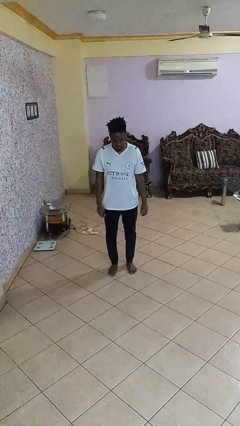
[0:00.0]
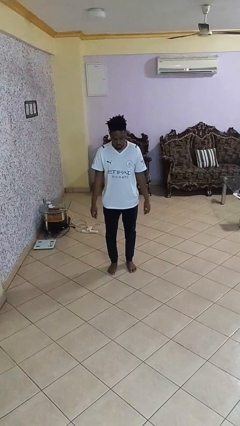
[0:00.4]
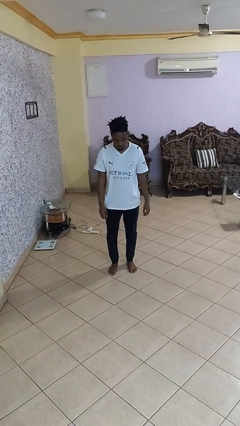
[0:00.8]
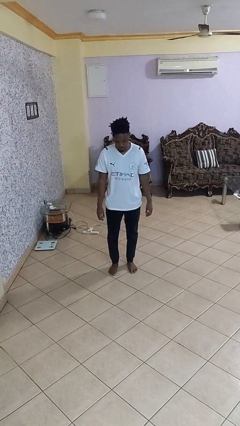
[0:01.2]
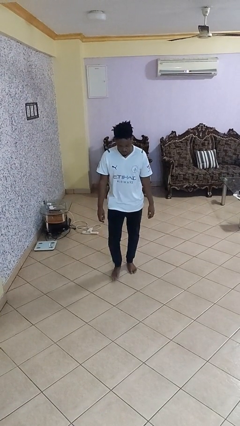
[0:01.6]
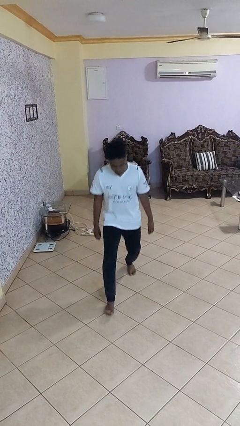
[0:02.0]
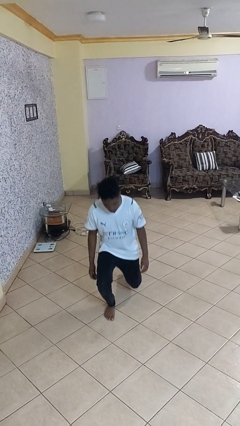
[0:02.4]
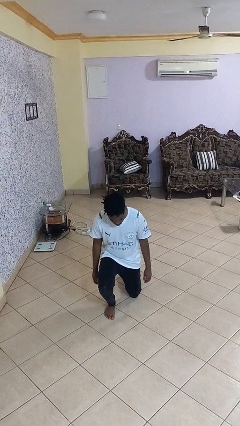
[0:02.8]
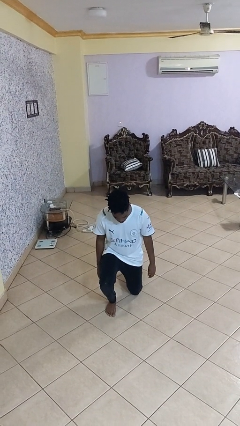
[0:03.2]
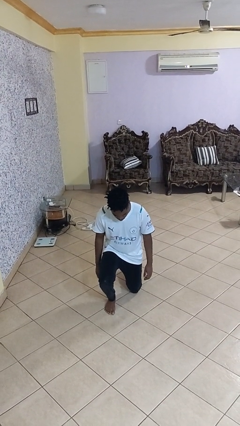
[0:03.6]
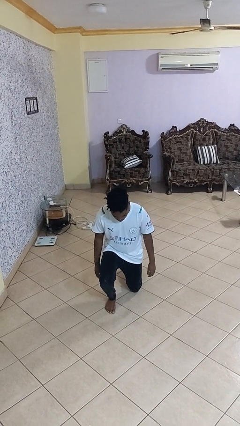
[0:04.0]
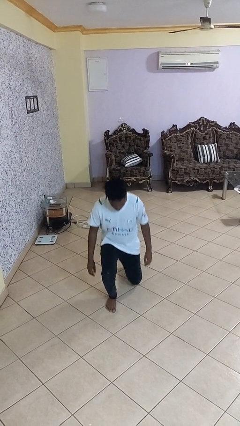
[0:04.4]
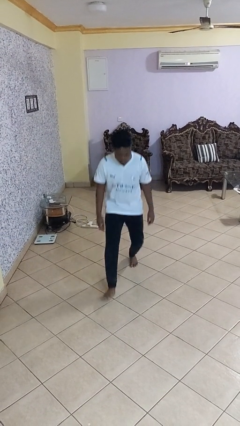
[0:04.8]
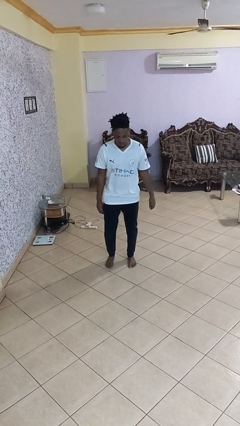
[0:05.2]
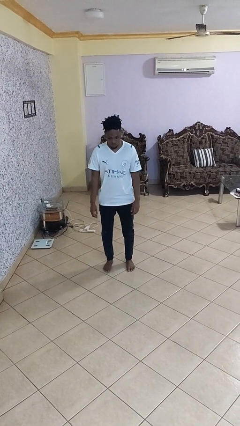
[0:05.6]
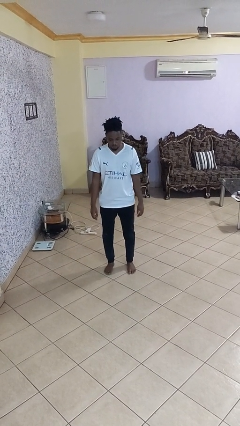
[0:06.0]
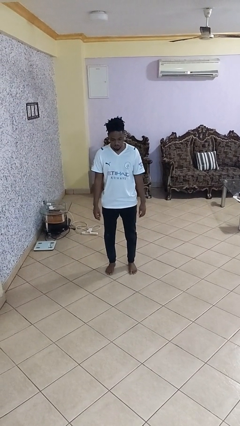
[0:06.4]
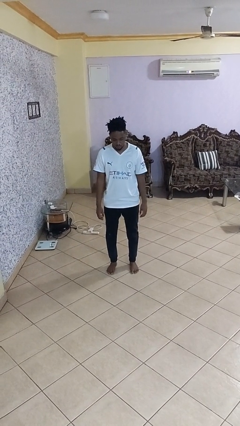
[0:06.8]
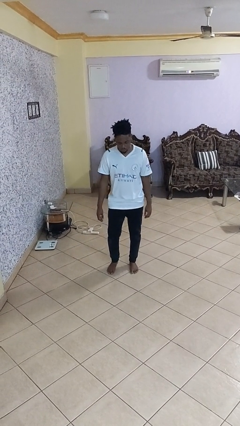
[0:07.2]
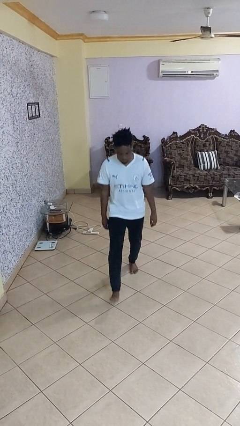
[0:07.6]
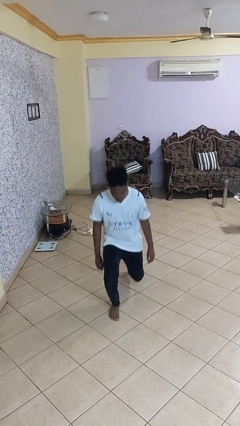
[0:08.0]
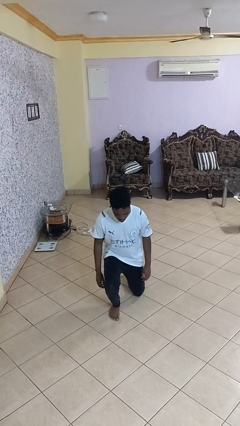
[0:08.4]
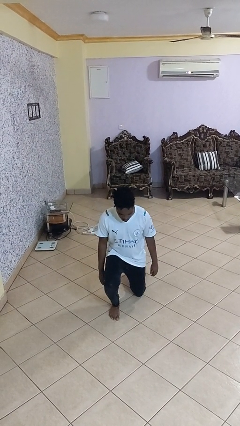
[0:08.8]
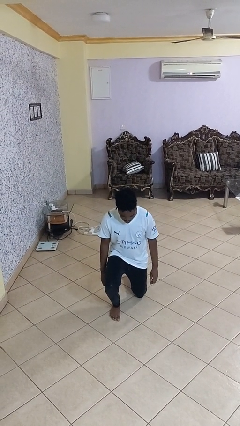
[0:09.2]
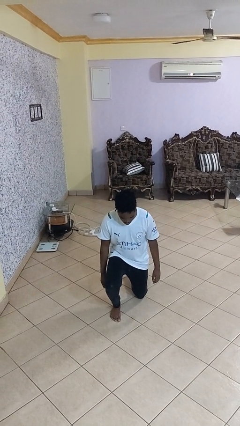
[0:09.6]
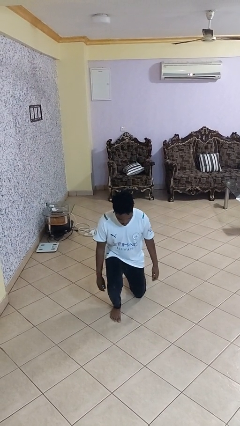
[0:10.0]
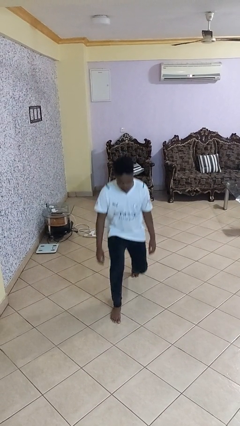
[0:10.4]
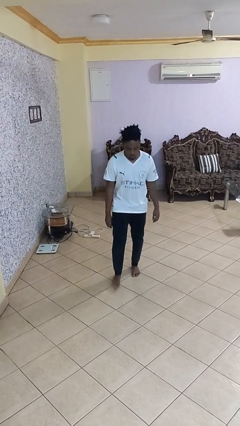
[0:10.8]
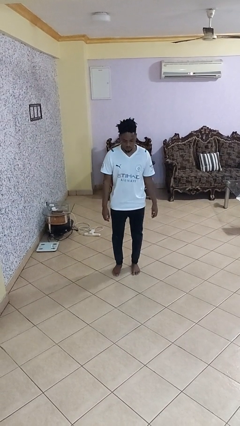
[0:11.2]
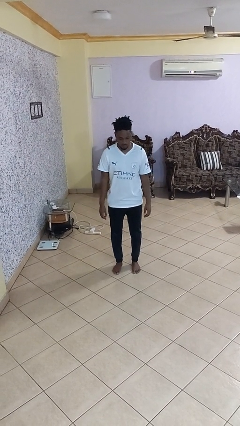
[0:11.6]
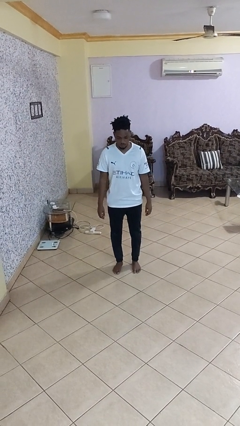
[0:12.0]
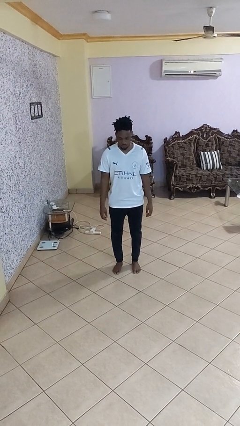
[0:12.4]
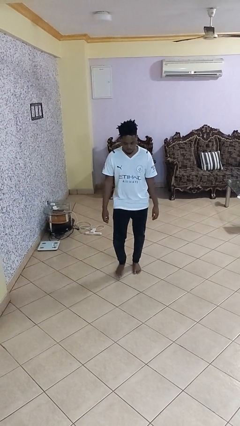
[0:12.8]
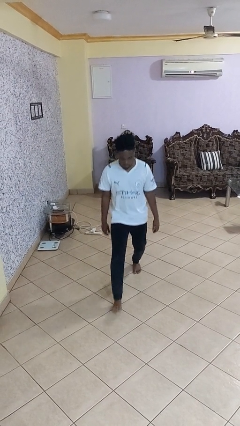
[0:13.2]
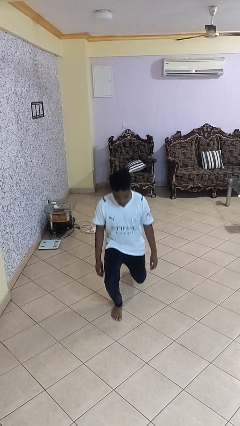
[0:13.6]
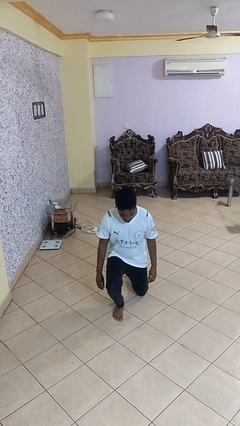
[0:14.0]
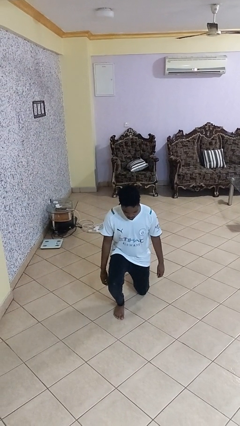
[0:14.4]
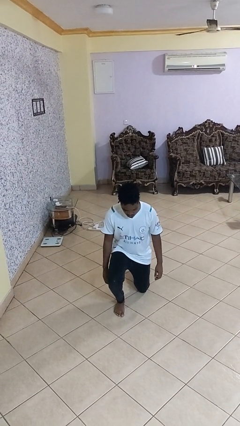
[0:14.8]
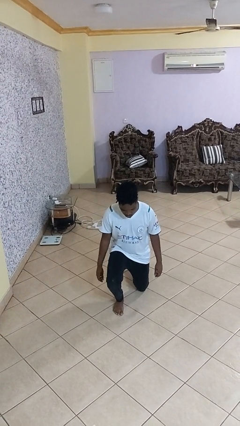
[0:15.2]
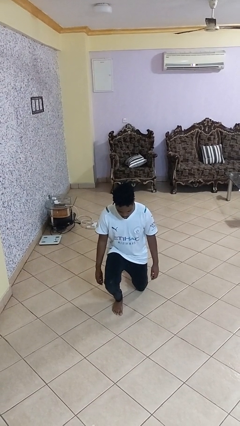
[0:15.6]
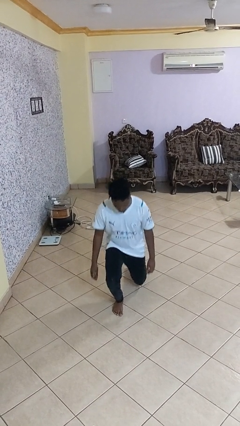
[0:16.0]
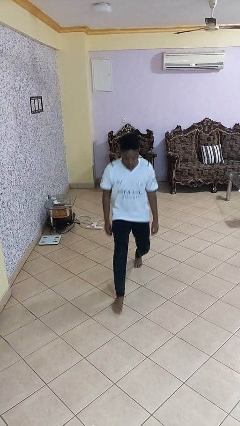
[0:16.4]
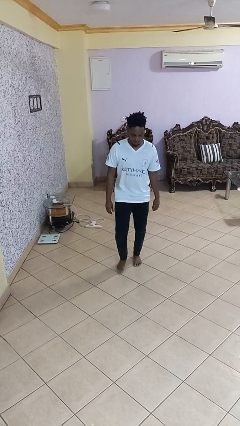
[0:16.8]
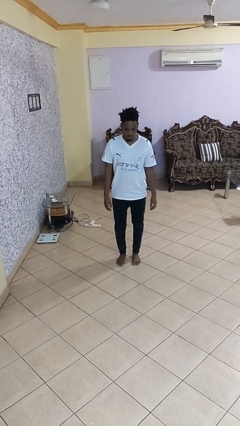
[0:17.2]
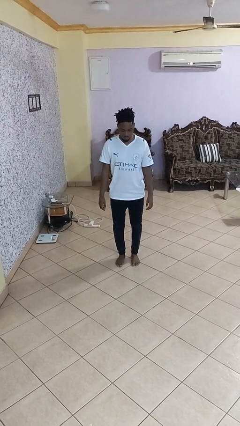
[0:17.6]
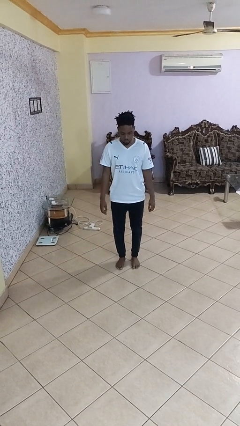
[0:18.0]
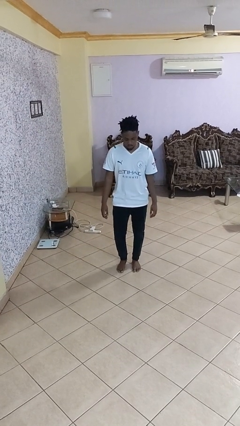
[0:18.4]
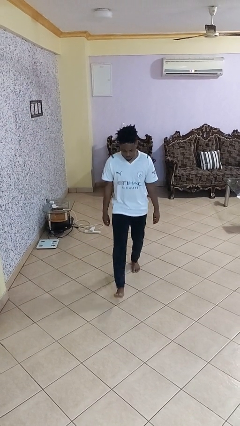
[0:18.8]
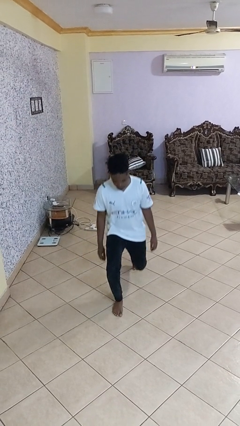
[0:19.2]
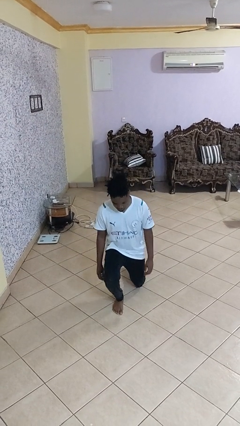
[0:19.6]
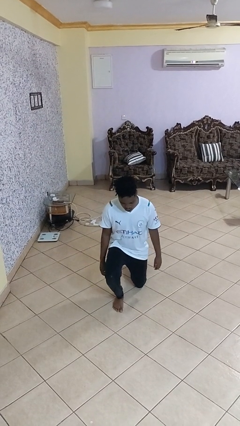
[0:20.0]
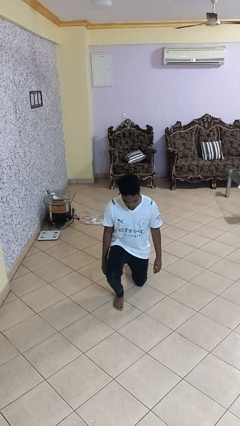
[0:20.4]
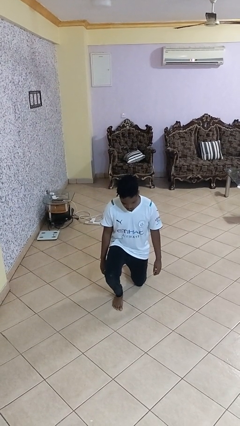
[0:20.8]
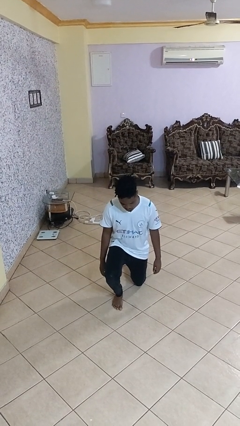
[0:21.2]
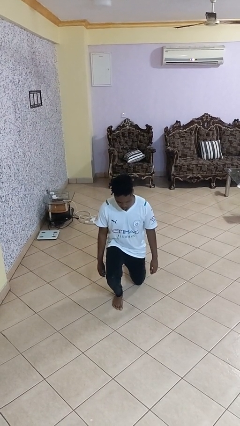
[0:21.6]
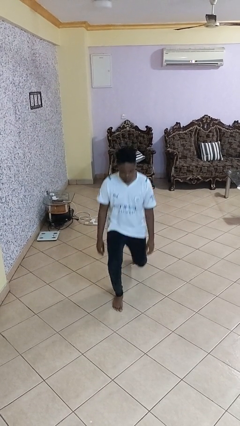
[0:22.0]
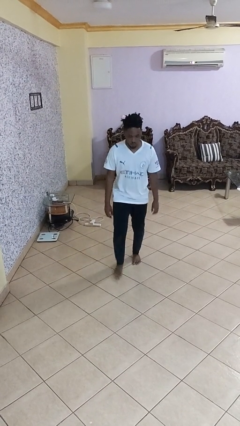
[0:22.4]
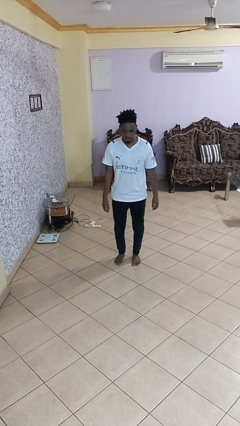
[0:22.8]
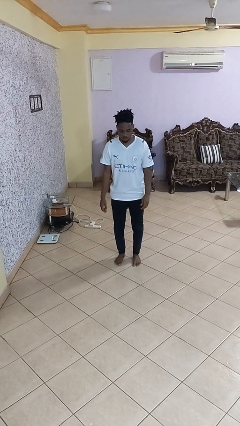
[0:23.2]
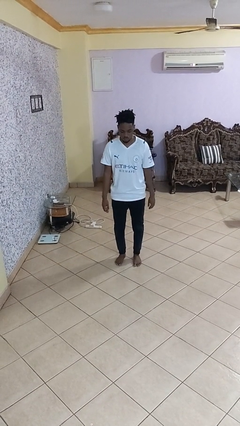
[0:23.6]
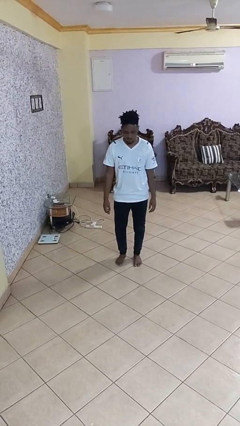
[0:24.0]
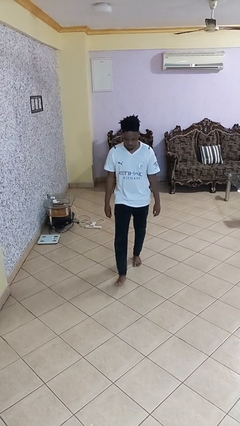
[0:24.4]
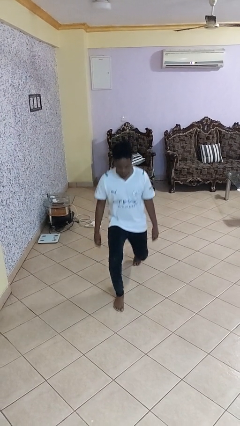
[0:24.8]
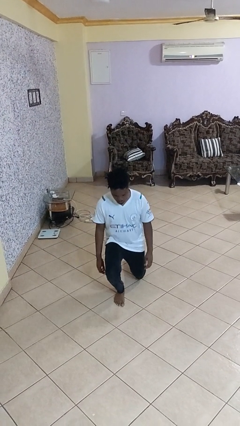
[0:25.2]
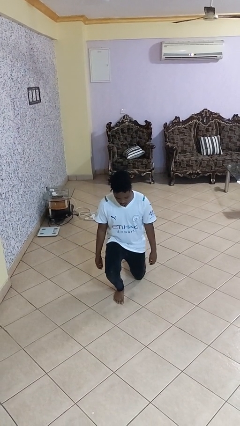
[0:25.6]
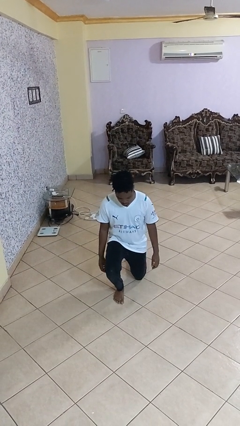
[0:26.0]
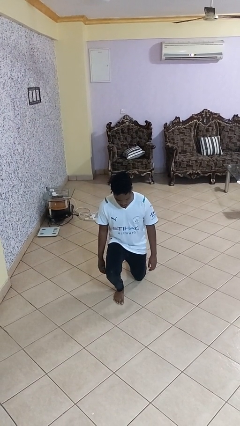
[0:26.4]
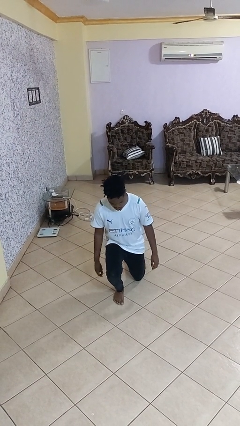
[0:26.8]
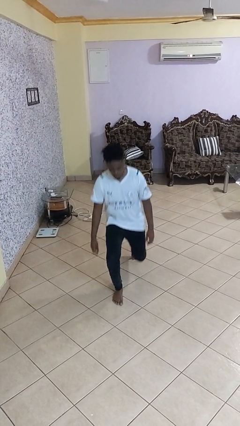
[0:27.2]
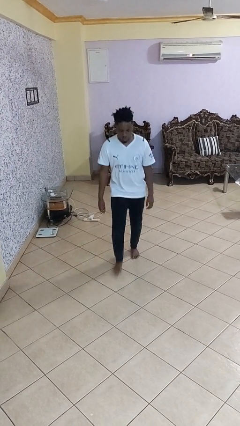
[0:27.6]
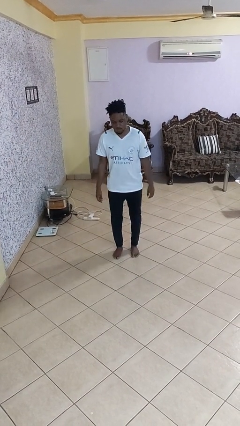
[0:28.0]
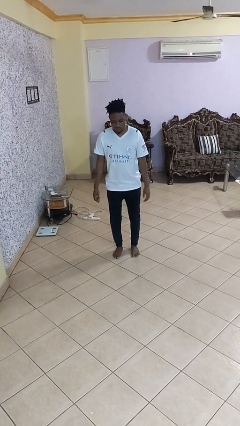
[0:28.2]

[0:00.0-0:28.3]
person kneels

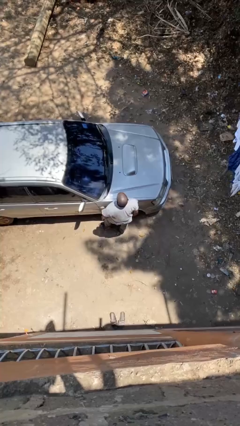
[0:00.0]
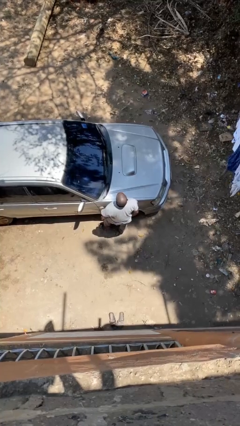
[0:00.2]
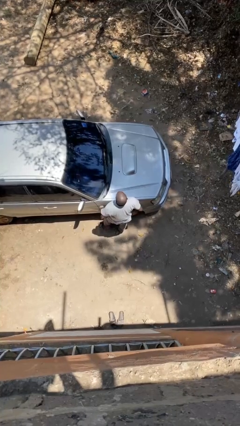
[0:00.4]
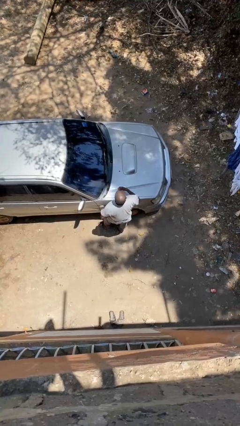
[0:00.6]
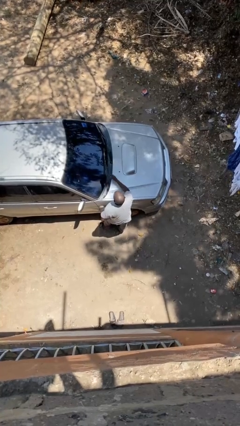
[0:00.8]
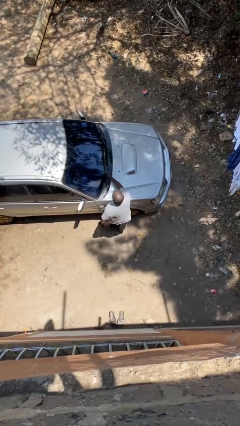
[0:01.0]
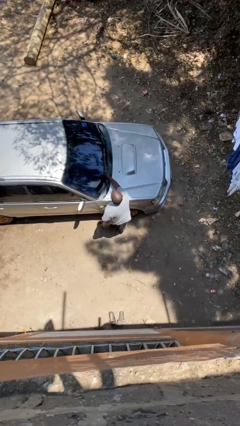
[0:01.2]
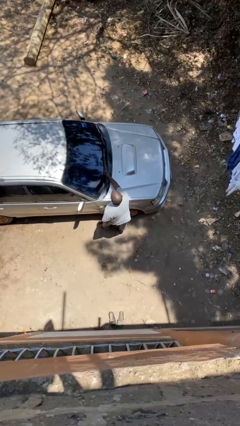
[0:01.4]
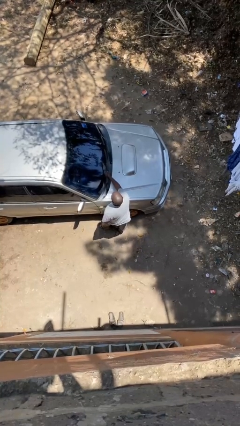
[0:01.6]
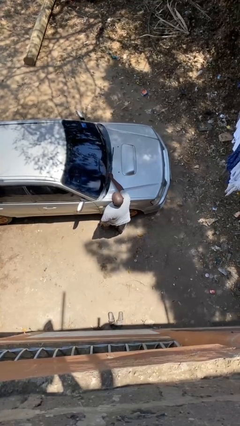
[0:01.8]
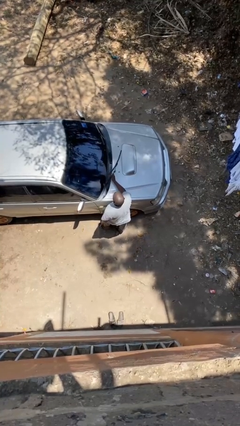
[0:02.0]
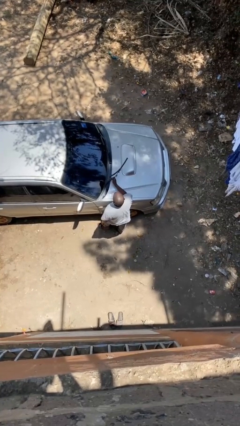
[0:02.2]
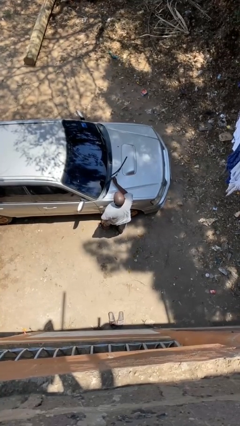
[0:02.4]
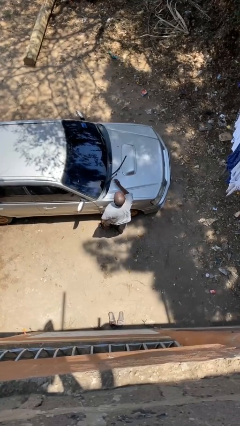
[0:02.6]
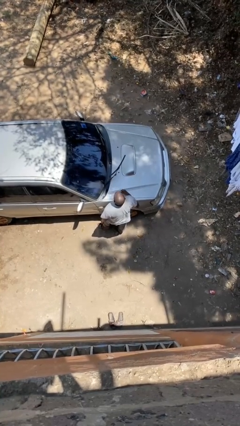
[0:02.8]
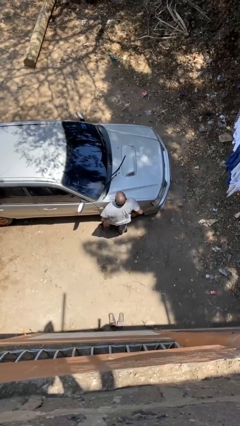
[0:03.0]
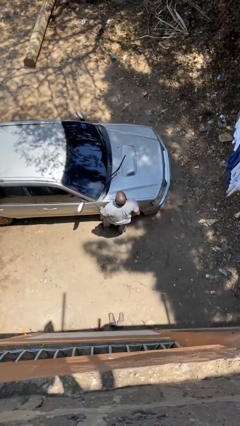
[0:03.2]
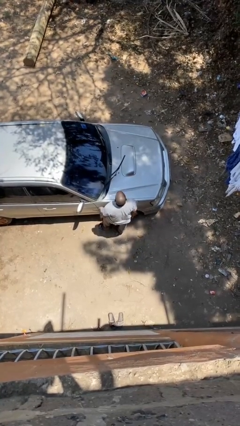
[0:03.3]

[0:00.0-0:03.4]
person flips up car wipers

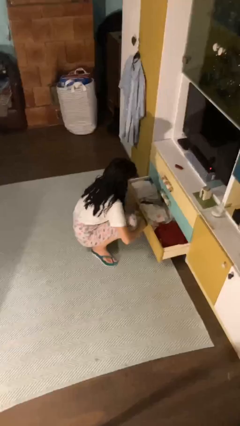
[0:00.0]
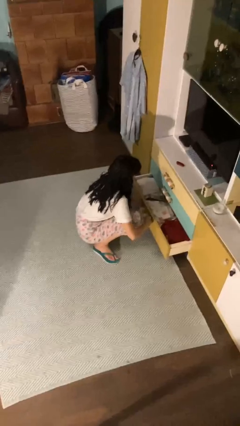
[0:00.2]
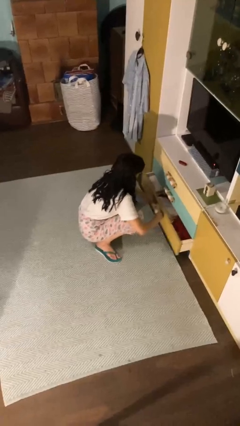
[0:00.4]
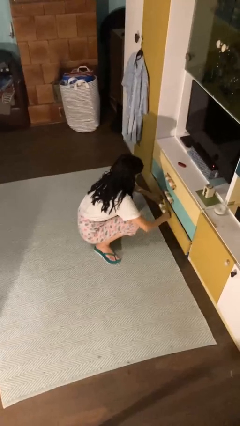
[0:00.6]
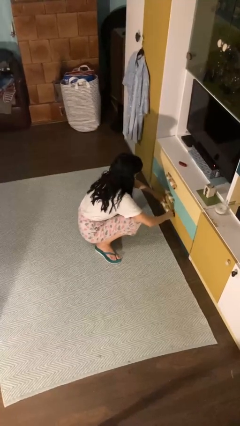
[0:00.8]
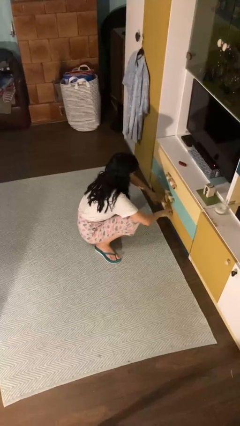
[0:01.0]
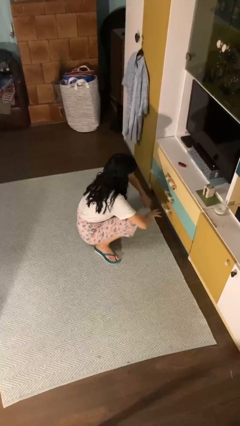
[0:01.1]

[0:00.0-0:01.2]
person closes dresser drawer
